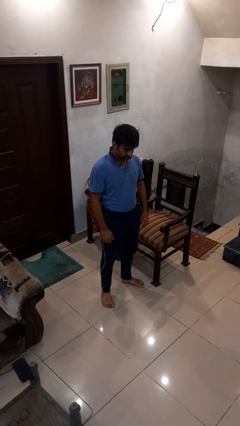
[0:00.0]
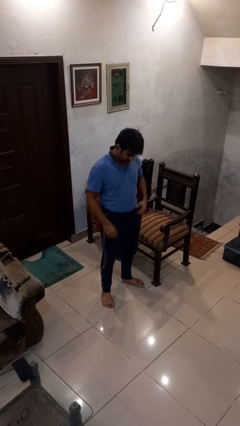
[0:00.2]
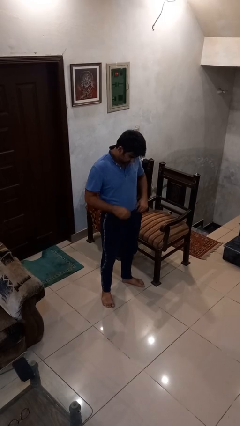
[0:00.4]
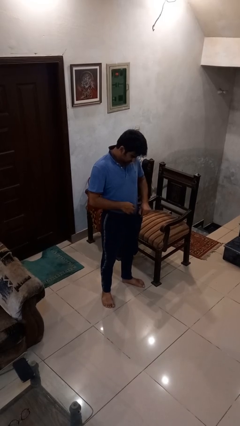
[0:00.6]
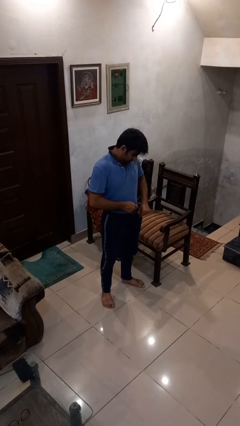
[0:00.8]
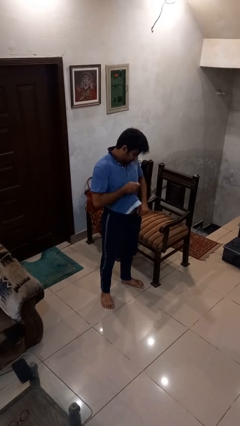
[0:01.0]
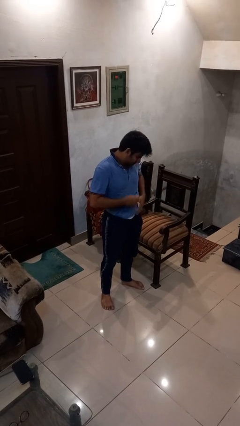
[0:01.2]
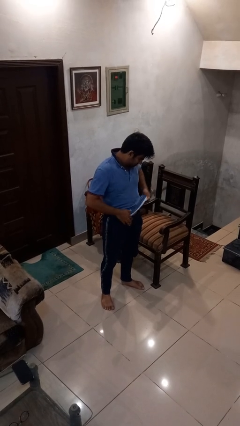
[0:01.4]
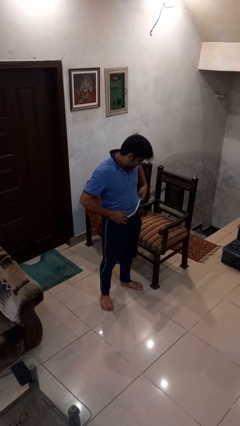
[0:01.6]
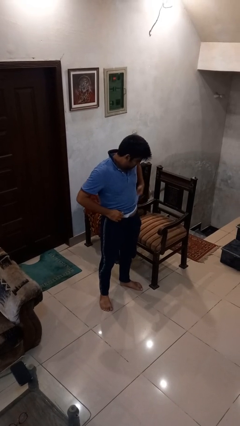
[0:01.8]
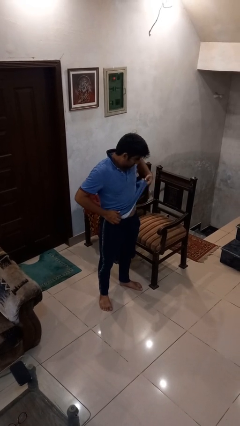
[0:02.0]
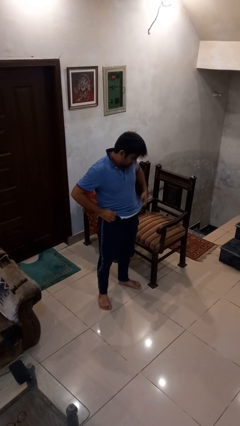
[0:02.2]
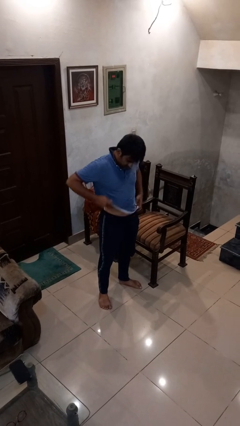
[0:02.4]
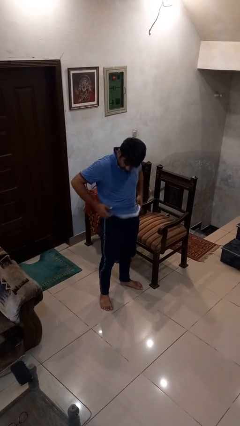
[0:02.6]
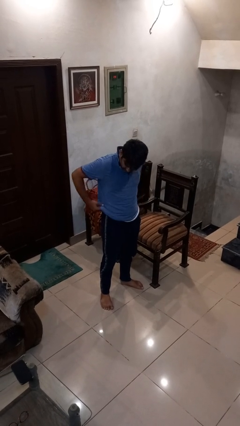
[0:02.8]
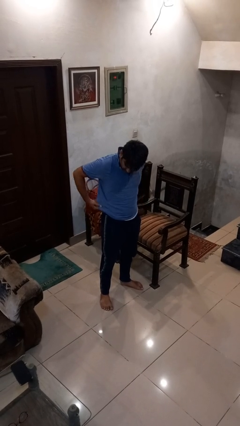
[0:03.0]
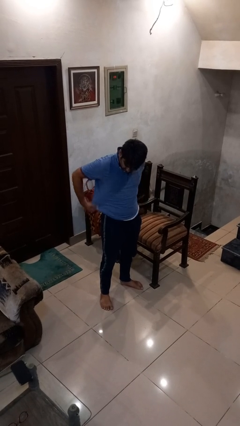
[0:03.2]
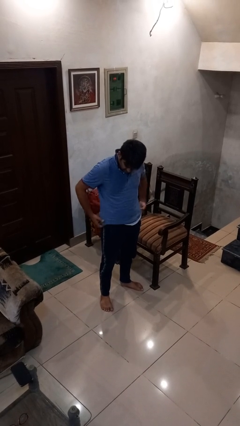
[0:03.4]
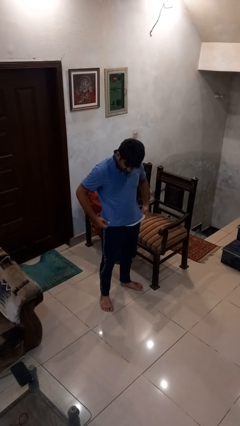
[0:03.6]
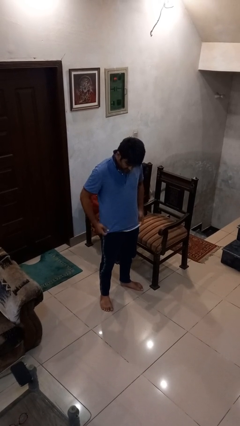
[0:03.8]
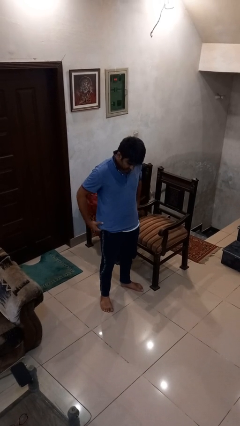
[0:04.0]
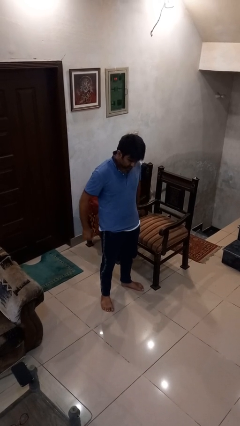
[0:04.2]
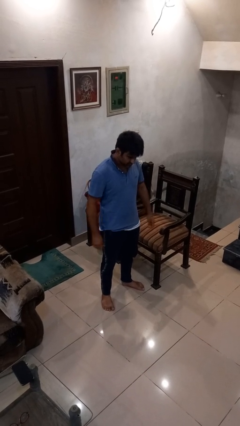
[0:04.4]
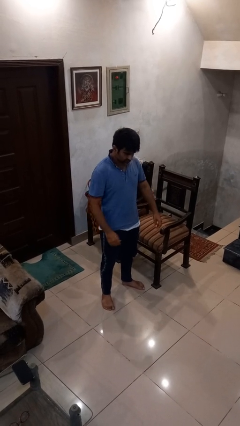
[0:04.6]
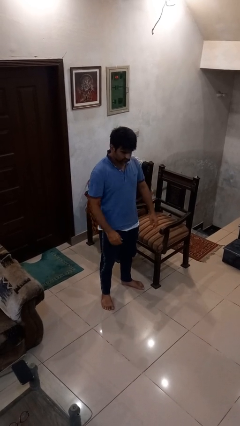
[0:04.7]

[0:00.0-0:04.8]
person untucks shirt

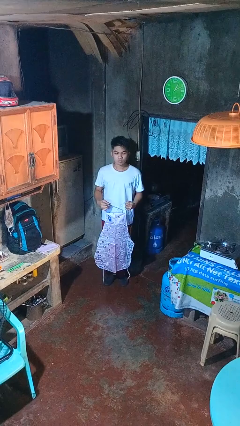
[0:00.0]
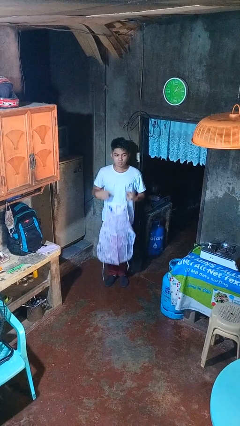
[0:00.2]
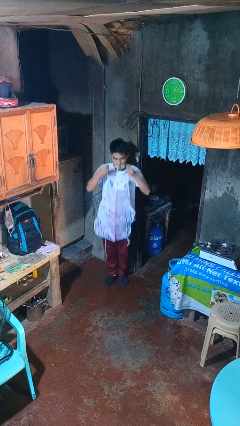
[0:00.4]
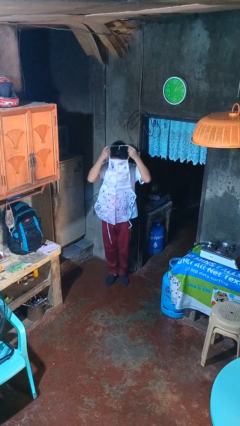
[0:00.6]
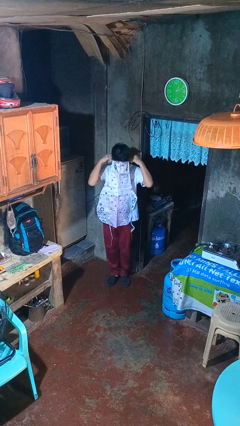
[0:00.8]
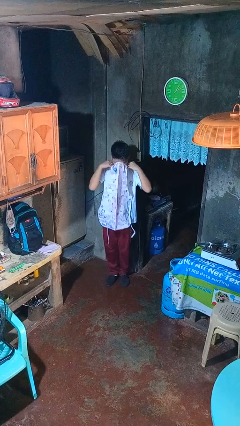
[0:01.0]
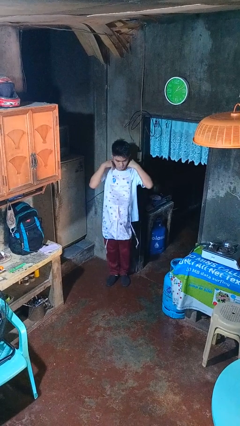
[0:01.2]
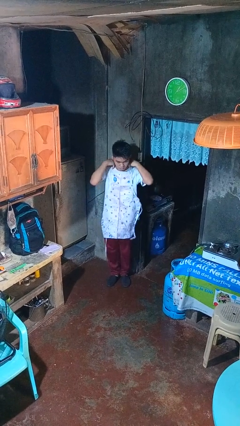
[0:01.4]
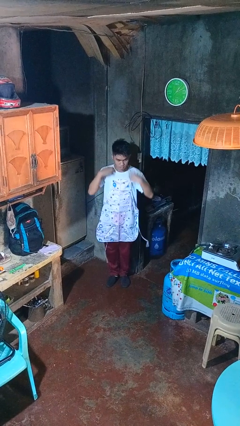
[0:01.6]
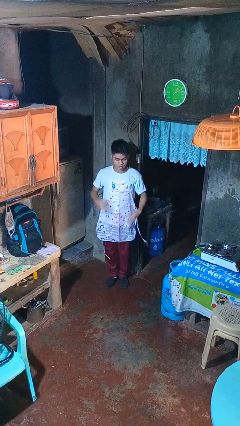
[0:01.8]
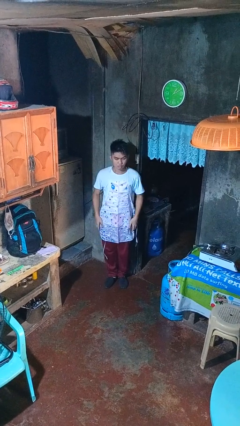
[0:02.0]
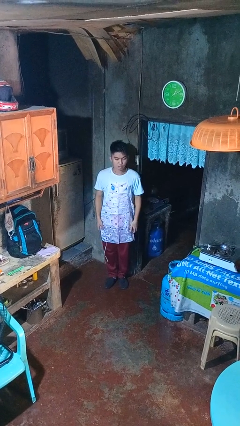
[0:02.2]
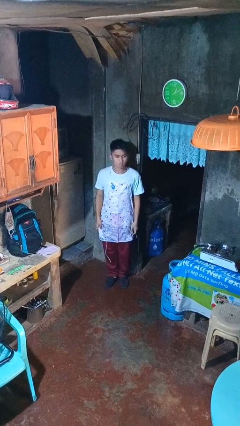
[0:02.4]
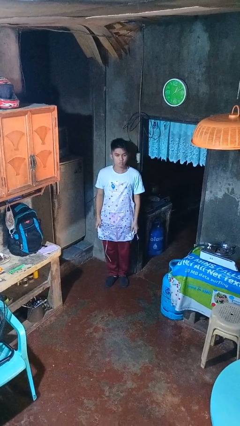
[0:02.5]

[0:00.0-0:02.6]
person puts on apron

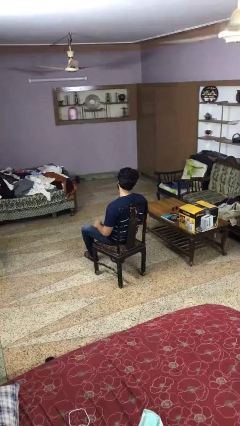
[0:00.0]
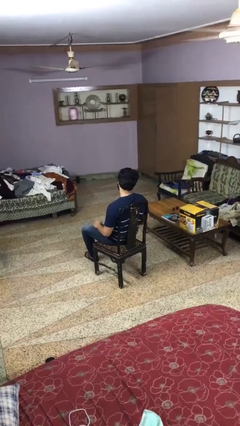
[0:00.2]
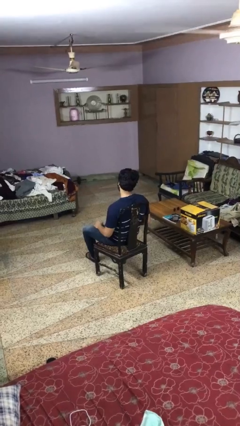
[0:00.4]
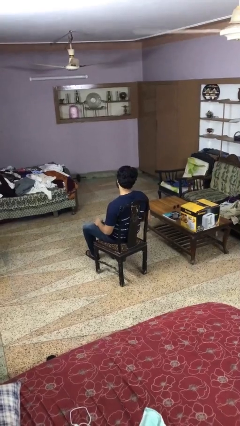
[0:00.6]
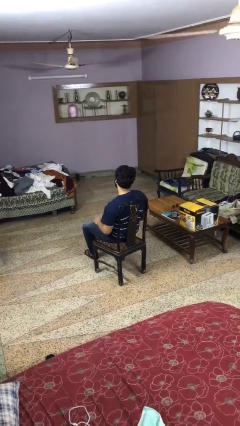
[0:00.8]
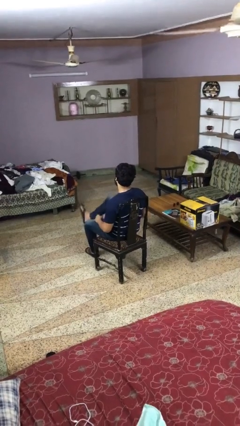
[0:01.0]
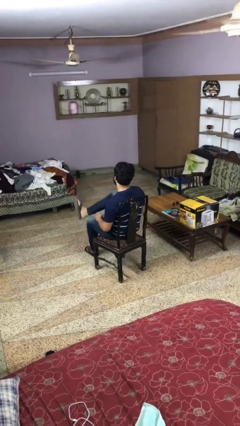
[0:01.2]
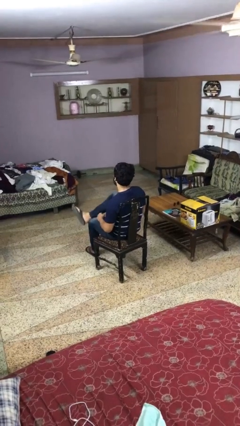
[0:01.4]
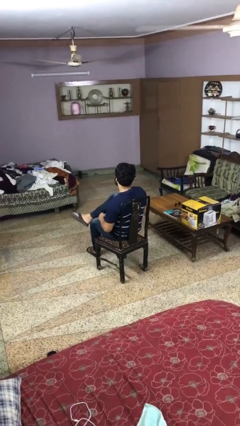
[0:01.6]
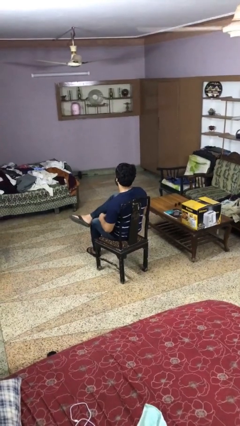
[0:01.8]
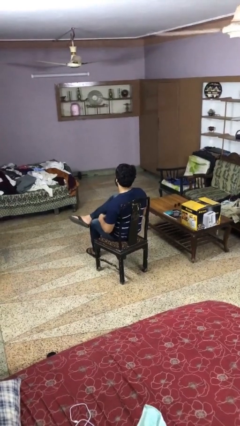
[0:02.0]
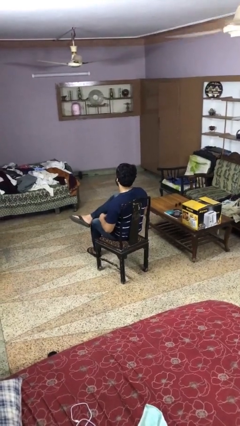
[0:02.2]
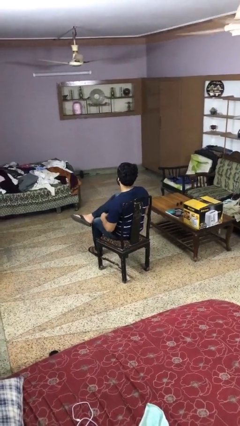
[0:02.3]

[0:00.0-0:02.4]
person crosses legs

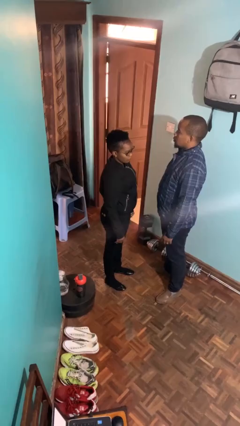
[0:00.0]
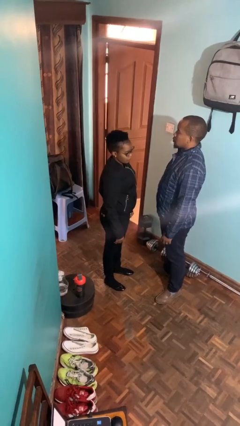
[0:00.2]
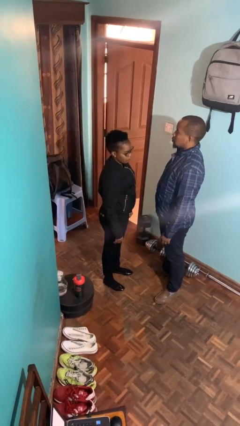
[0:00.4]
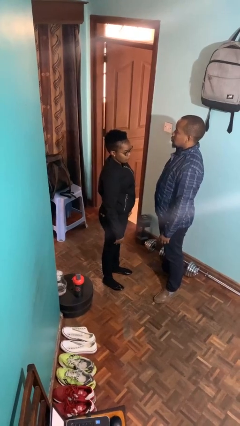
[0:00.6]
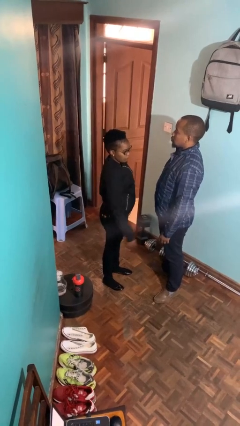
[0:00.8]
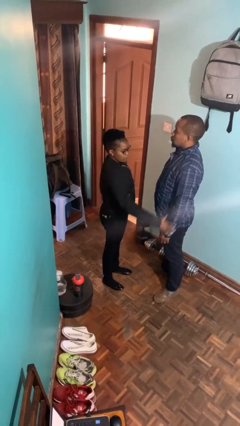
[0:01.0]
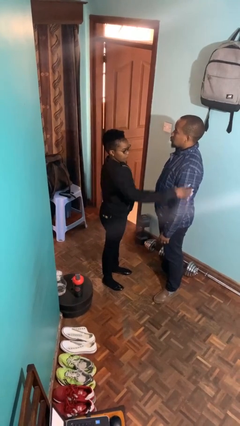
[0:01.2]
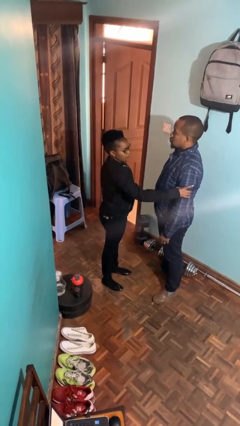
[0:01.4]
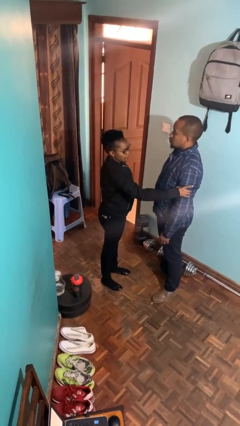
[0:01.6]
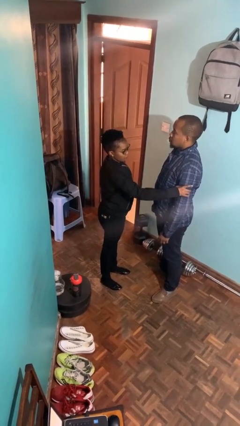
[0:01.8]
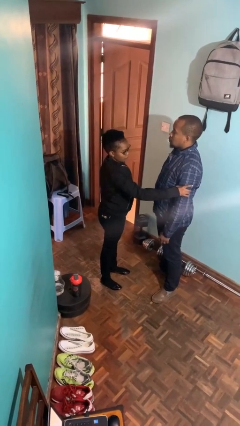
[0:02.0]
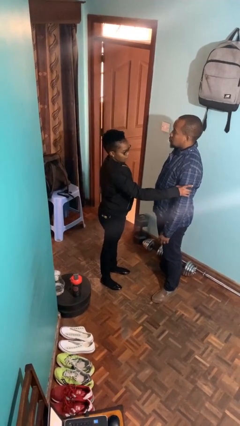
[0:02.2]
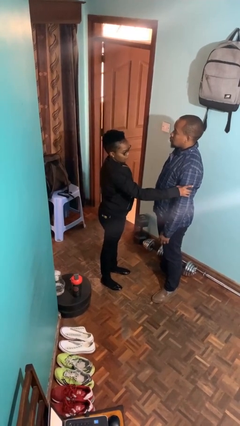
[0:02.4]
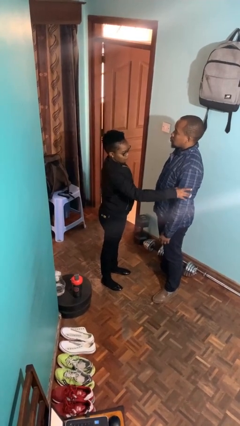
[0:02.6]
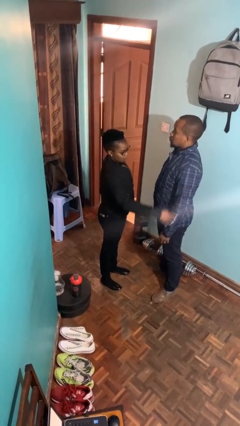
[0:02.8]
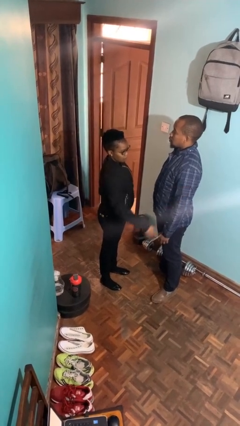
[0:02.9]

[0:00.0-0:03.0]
person grabs person by bicep

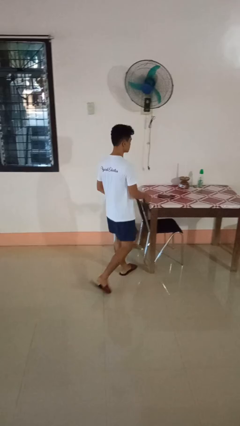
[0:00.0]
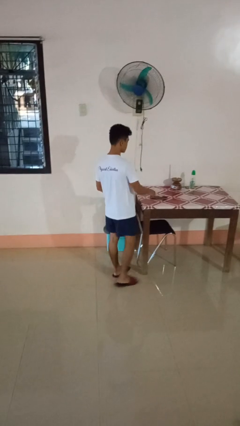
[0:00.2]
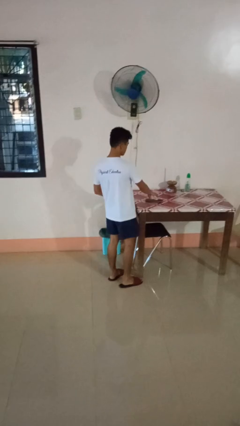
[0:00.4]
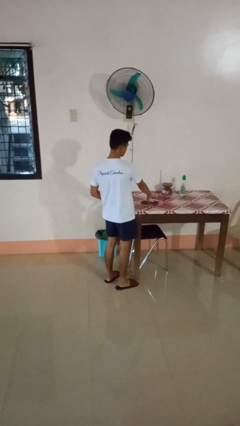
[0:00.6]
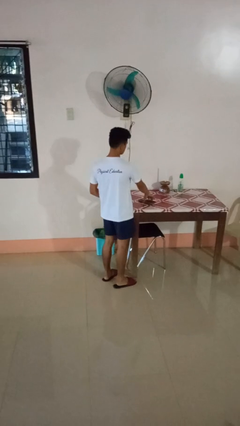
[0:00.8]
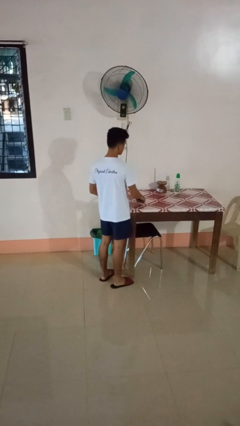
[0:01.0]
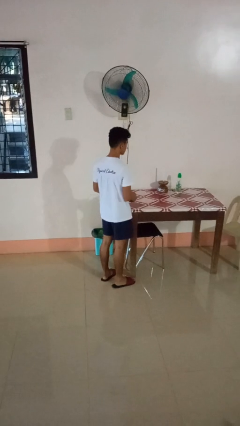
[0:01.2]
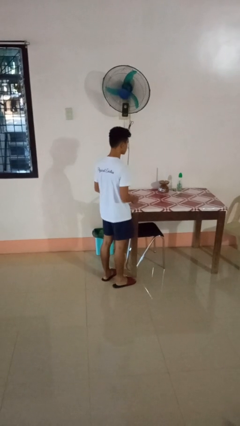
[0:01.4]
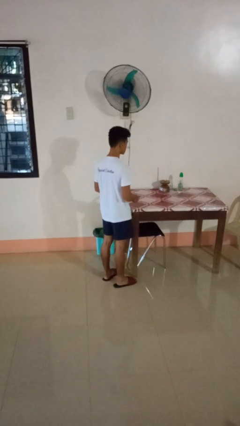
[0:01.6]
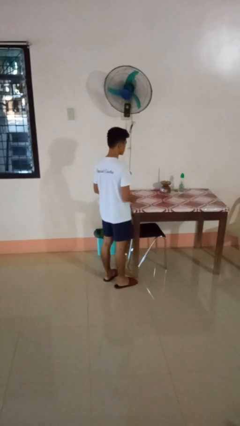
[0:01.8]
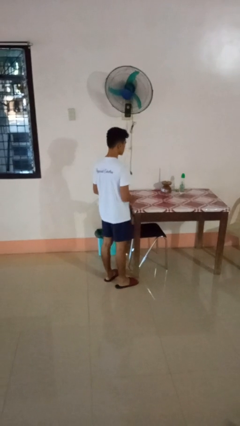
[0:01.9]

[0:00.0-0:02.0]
person picks up object from table

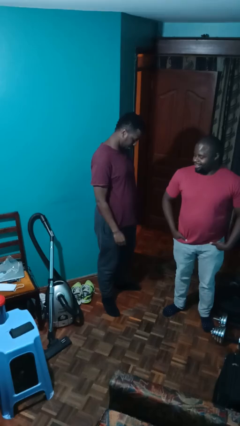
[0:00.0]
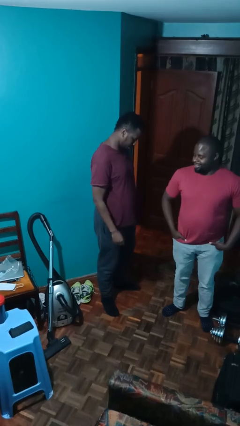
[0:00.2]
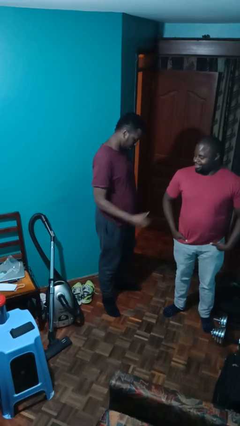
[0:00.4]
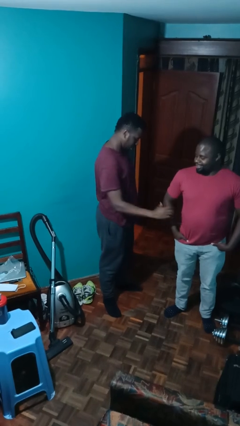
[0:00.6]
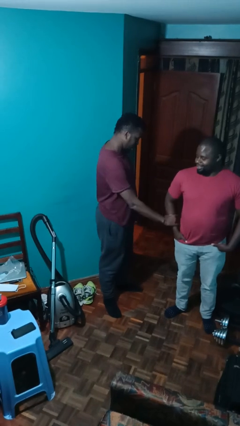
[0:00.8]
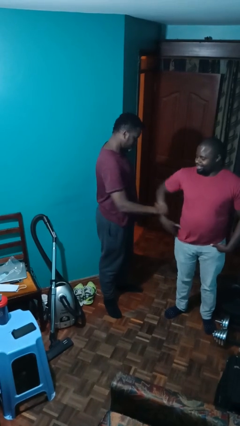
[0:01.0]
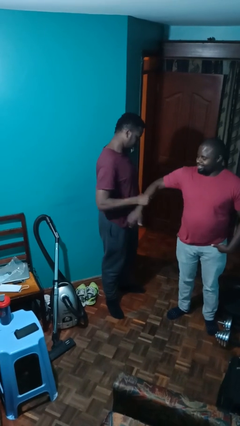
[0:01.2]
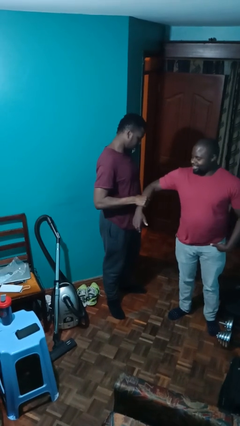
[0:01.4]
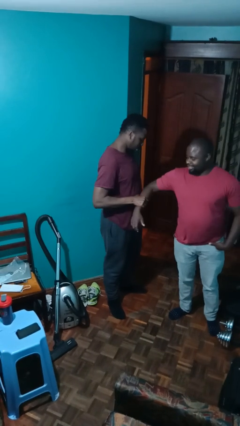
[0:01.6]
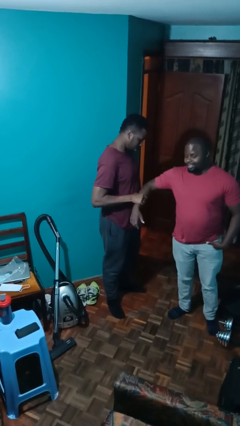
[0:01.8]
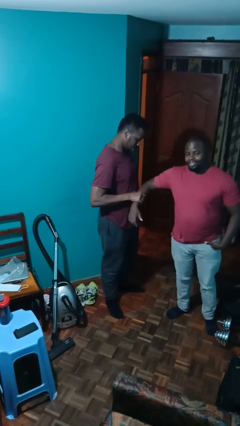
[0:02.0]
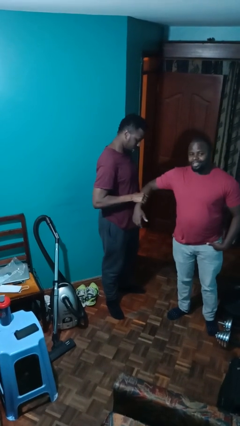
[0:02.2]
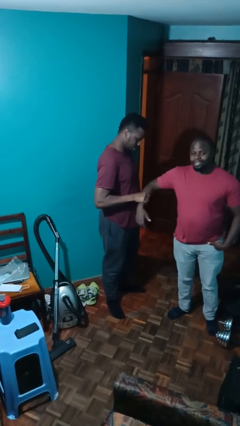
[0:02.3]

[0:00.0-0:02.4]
person grabs person by forearm

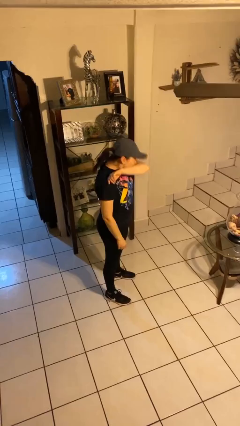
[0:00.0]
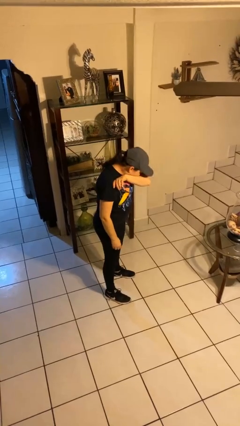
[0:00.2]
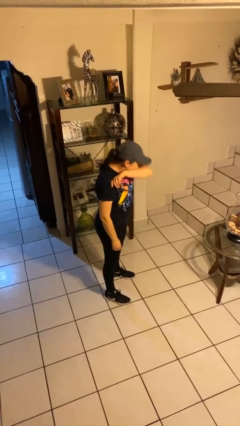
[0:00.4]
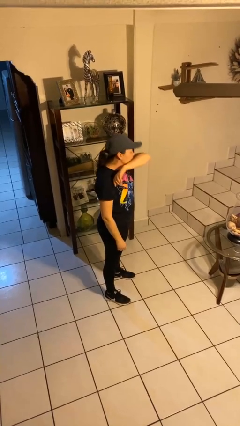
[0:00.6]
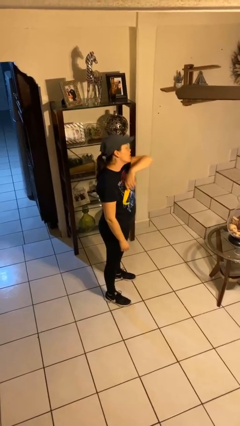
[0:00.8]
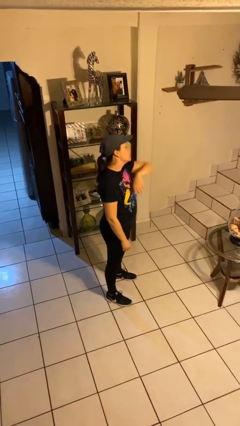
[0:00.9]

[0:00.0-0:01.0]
person sneezes into arm
